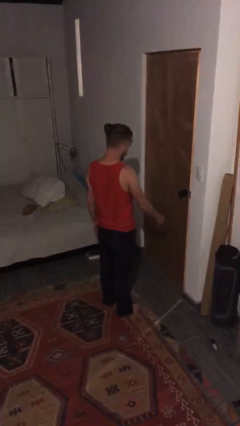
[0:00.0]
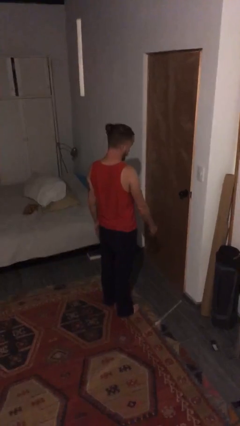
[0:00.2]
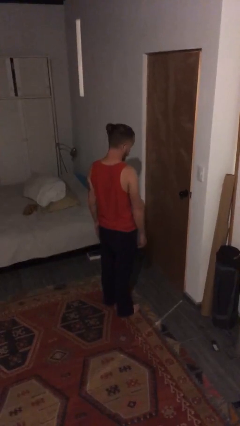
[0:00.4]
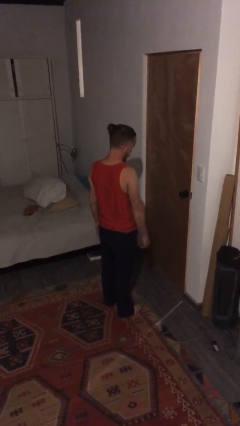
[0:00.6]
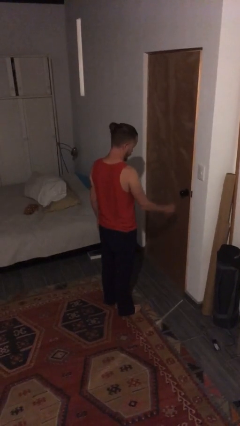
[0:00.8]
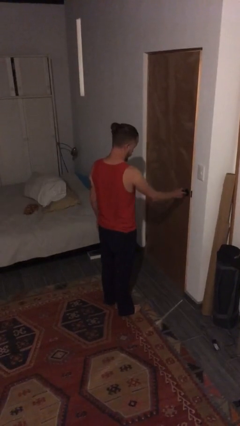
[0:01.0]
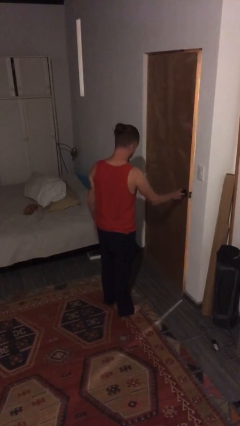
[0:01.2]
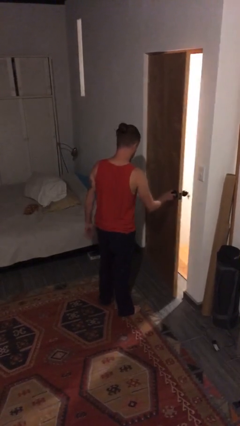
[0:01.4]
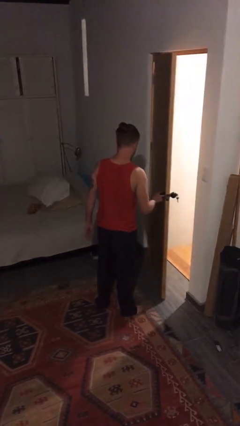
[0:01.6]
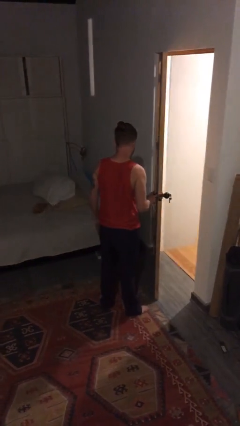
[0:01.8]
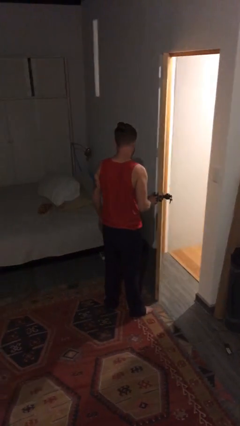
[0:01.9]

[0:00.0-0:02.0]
person opens facility door

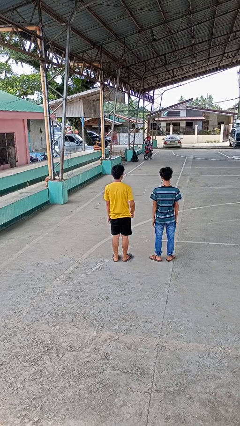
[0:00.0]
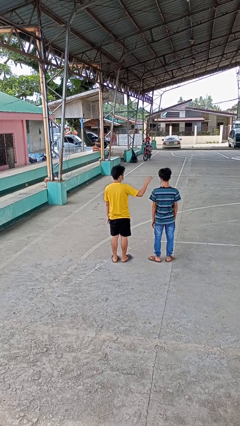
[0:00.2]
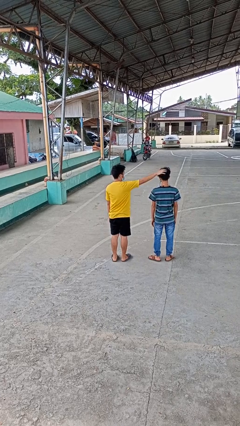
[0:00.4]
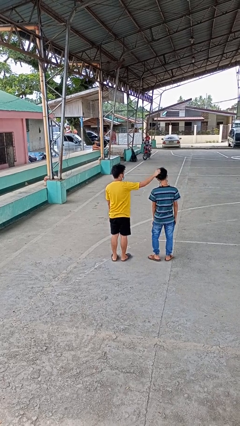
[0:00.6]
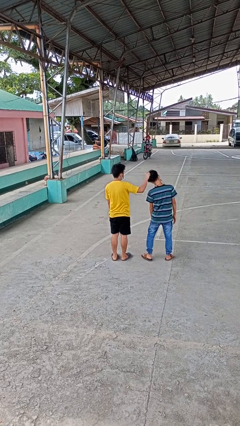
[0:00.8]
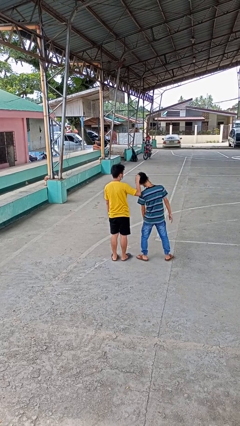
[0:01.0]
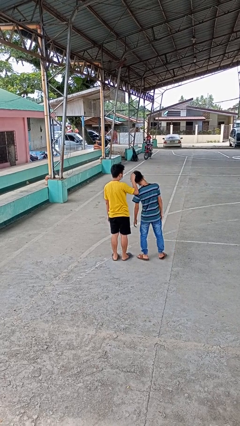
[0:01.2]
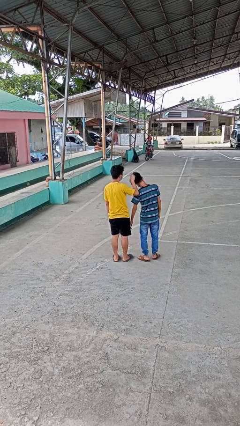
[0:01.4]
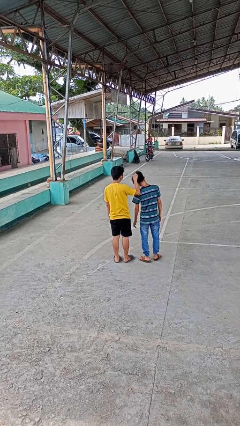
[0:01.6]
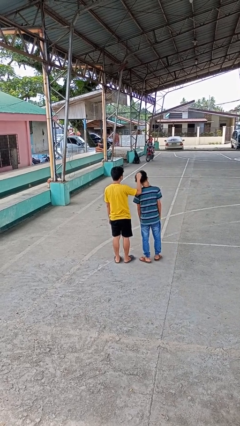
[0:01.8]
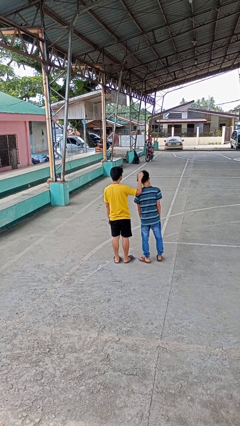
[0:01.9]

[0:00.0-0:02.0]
person grabs person by hair

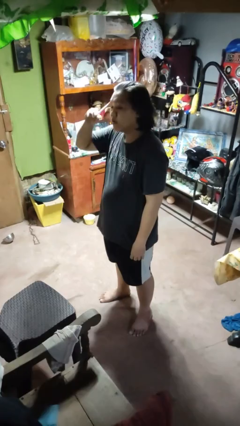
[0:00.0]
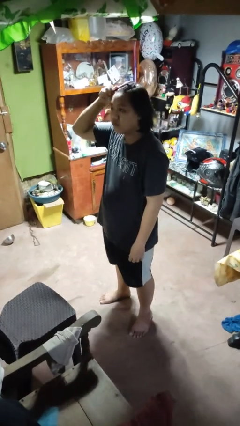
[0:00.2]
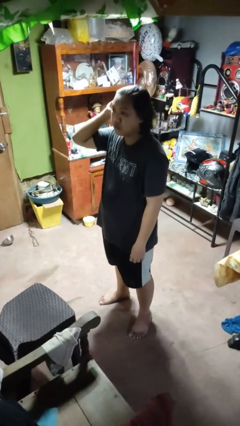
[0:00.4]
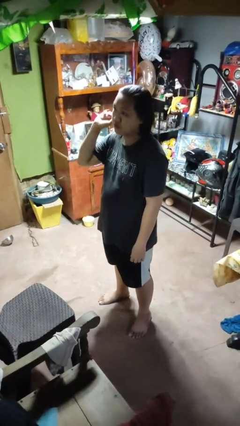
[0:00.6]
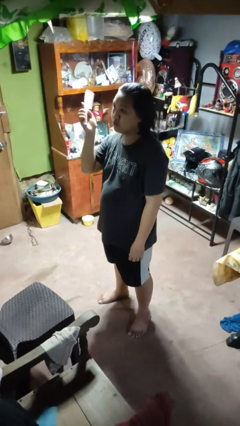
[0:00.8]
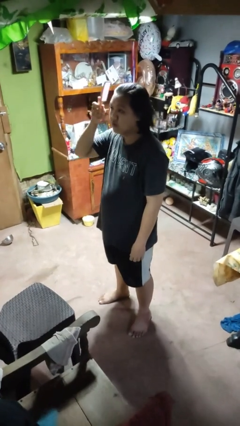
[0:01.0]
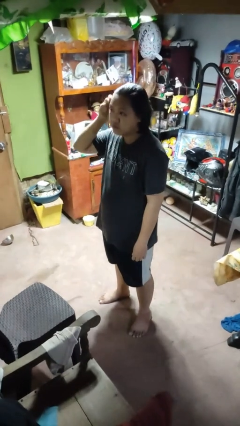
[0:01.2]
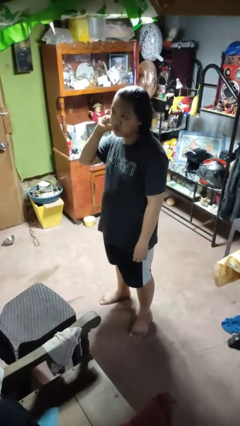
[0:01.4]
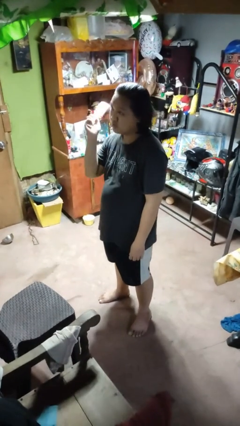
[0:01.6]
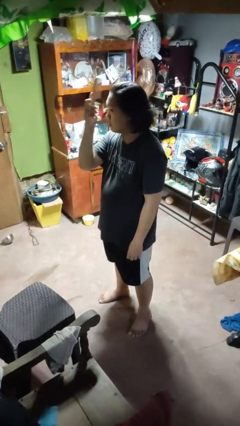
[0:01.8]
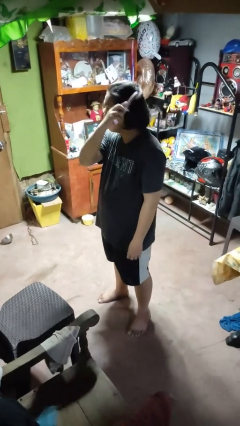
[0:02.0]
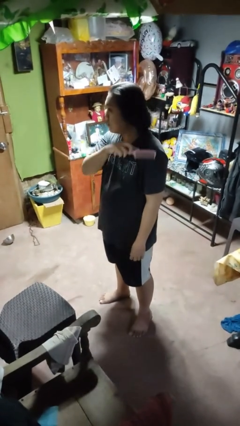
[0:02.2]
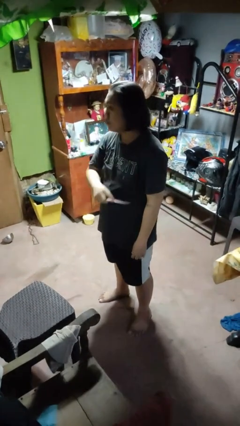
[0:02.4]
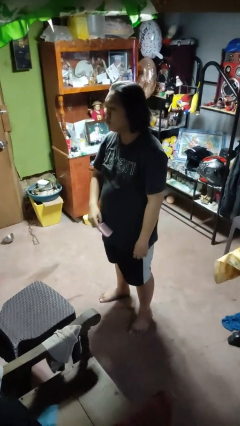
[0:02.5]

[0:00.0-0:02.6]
person brushes hair

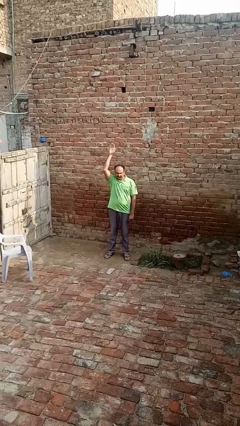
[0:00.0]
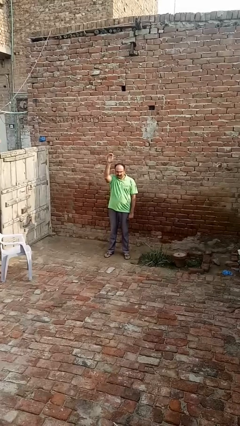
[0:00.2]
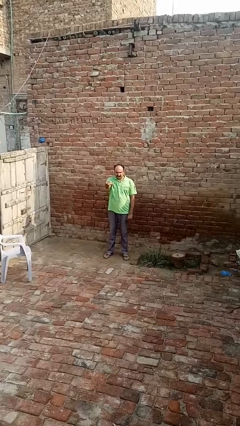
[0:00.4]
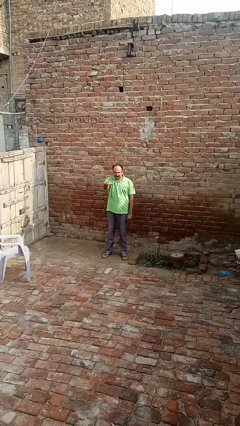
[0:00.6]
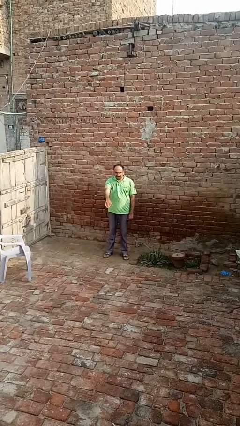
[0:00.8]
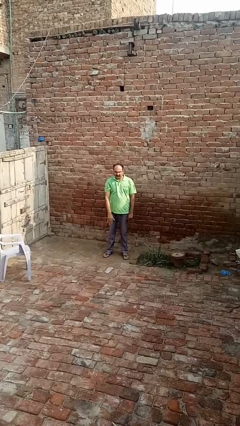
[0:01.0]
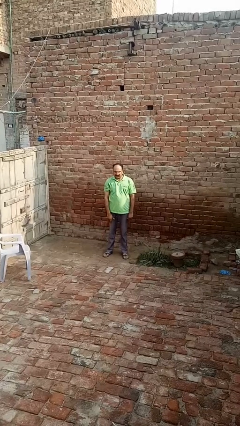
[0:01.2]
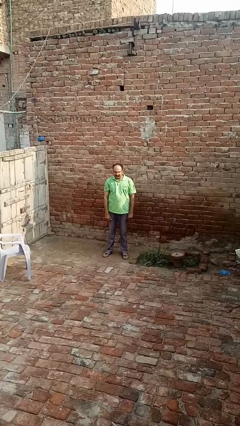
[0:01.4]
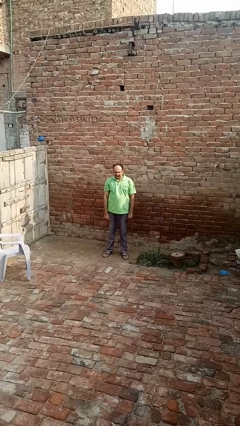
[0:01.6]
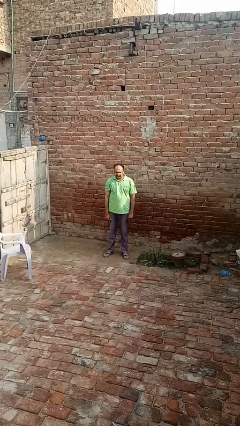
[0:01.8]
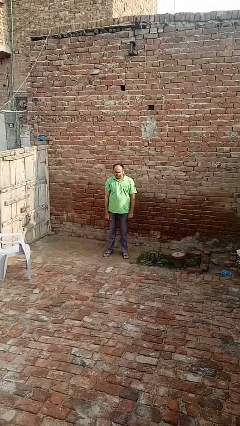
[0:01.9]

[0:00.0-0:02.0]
person gestures swipe down

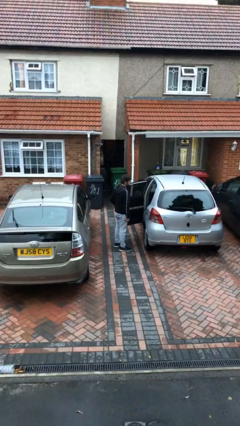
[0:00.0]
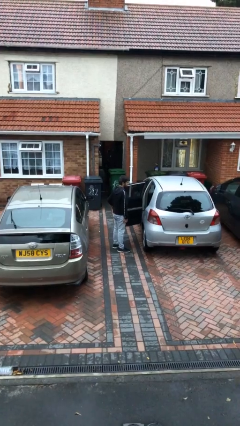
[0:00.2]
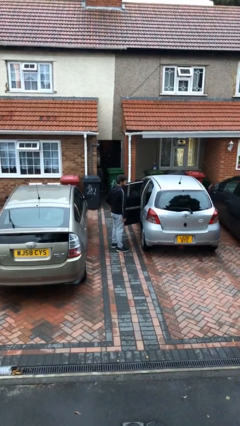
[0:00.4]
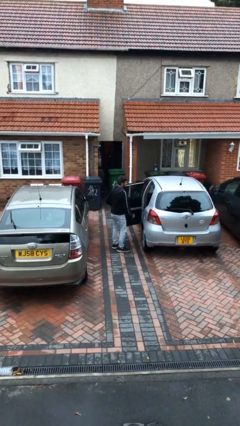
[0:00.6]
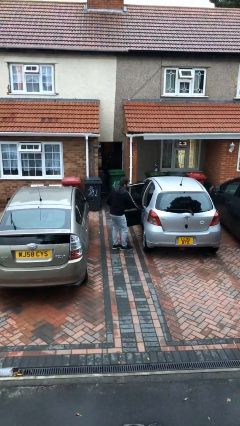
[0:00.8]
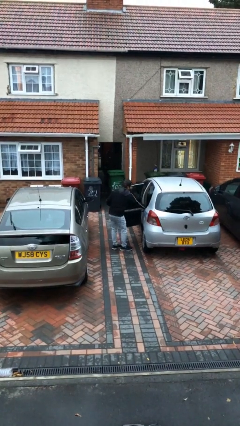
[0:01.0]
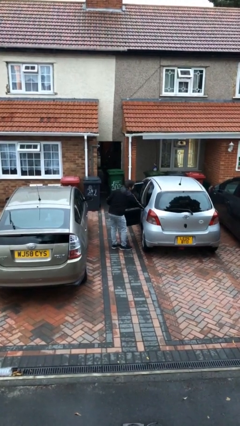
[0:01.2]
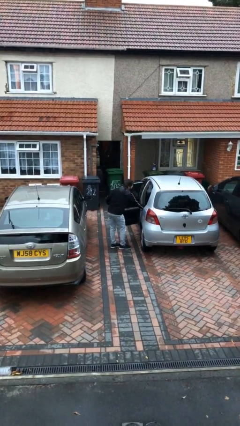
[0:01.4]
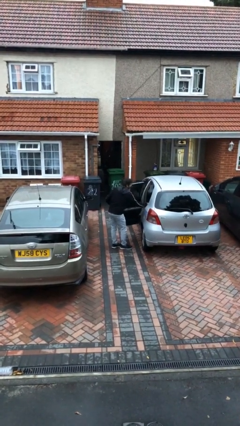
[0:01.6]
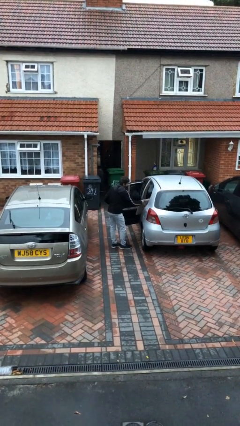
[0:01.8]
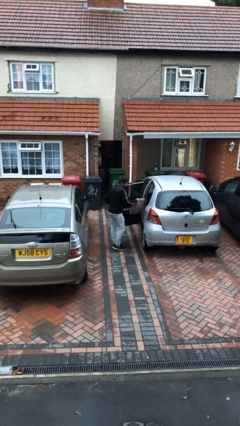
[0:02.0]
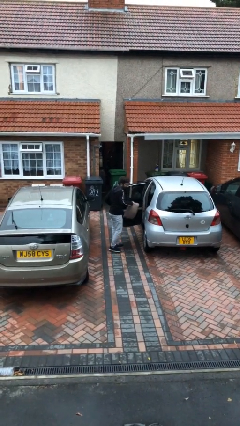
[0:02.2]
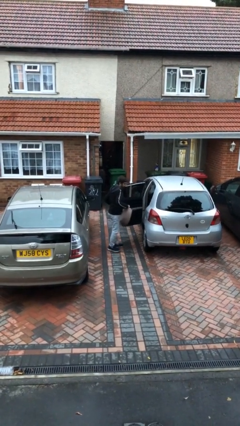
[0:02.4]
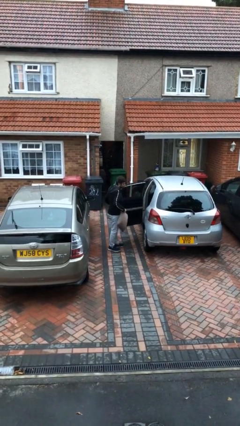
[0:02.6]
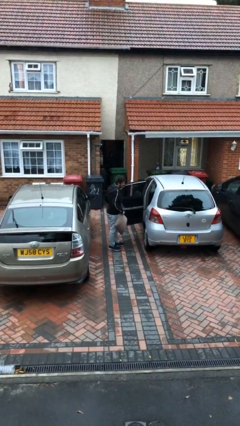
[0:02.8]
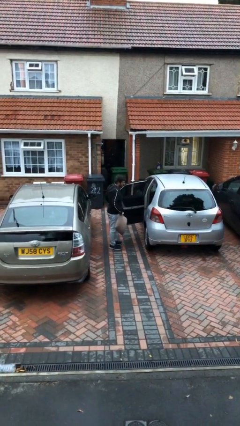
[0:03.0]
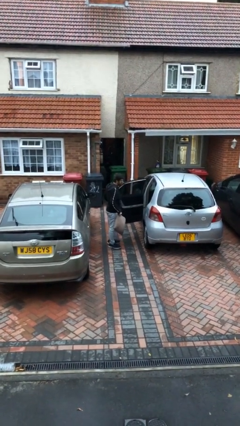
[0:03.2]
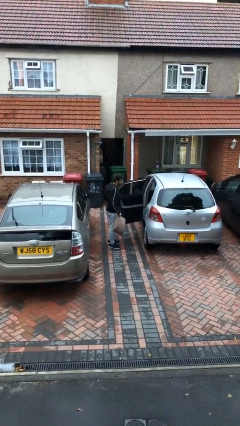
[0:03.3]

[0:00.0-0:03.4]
person unloads car

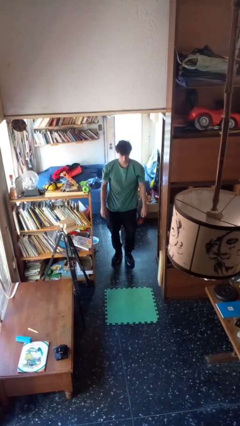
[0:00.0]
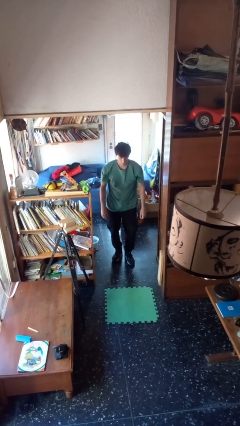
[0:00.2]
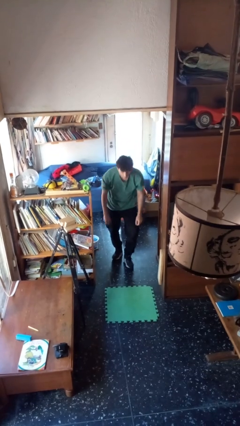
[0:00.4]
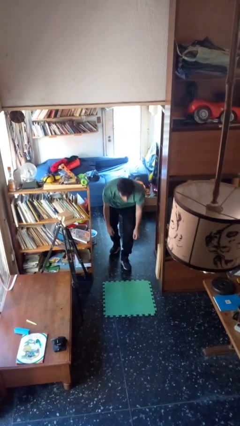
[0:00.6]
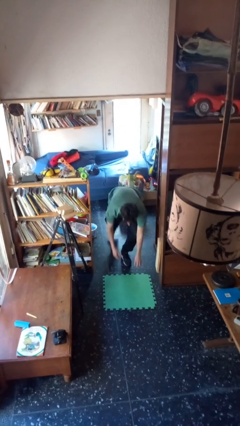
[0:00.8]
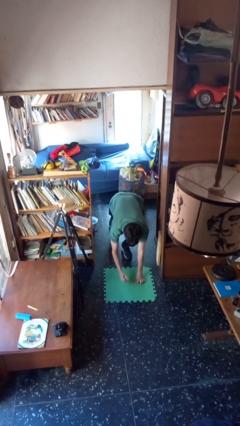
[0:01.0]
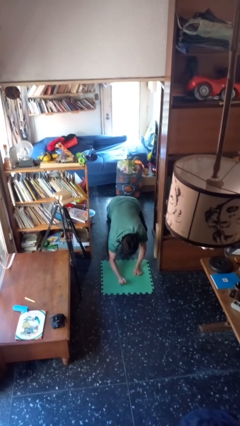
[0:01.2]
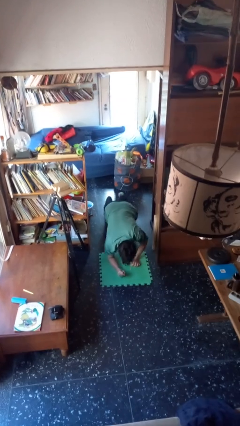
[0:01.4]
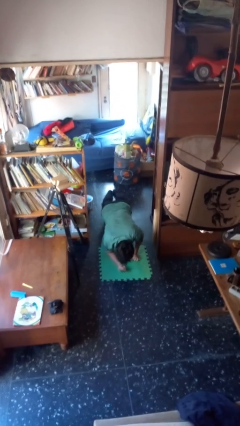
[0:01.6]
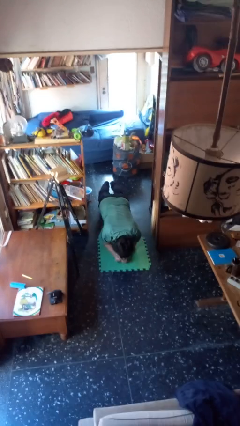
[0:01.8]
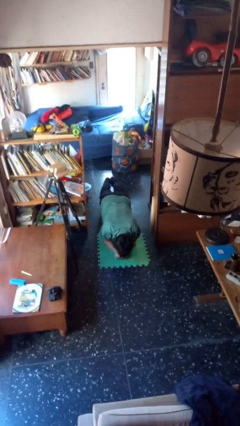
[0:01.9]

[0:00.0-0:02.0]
person exercises with plank

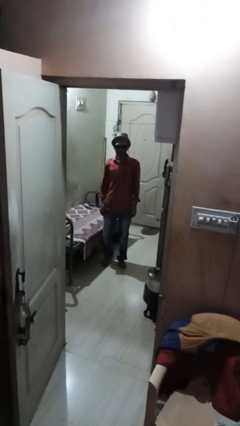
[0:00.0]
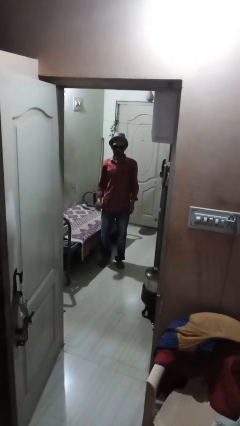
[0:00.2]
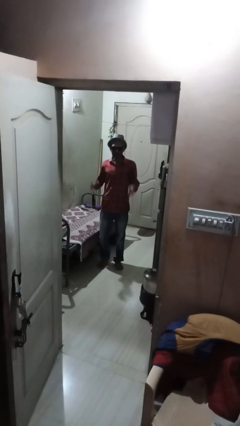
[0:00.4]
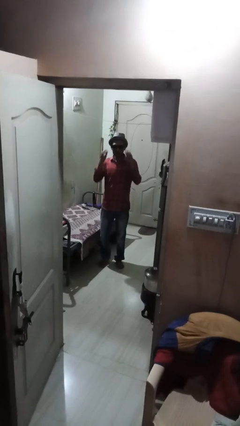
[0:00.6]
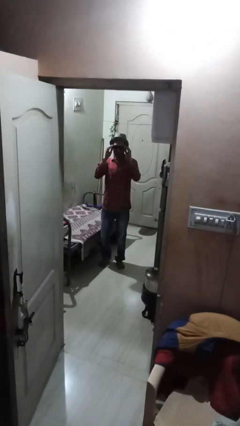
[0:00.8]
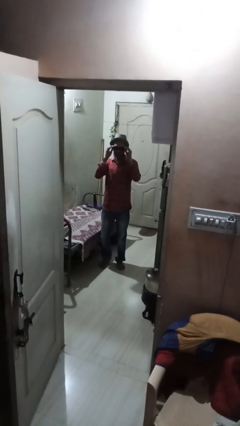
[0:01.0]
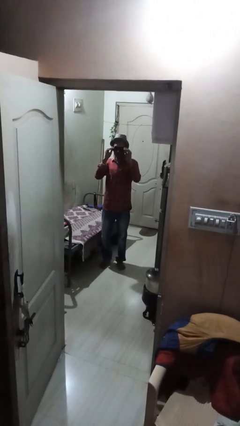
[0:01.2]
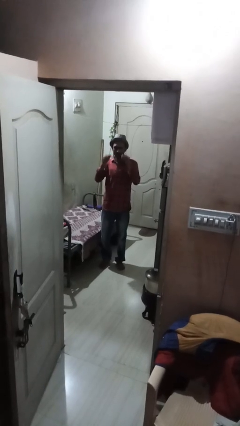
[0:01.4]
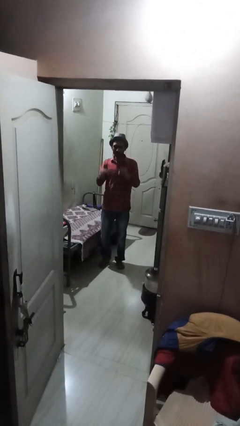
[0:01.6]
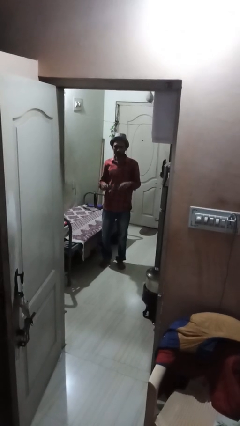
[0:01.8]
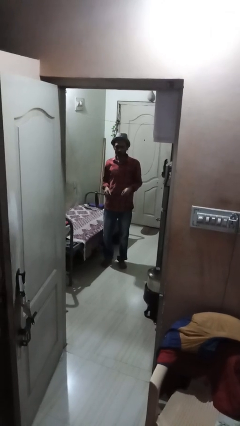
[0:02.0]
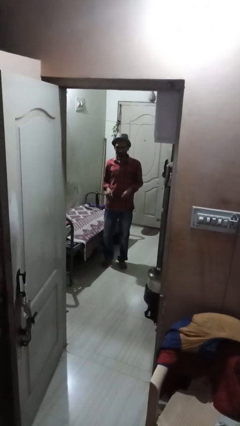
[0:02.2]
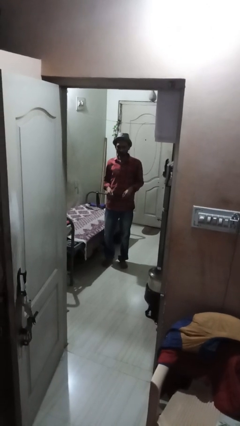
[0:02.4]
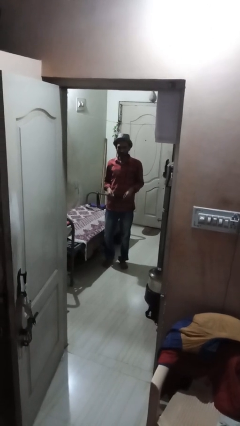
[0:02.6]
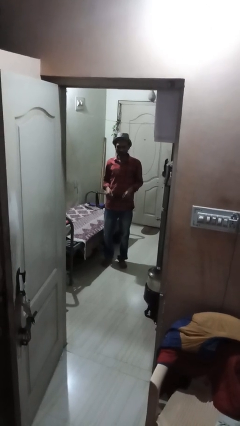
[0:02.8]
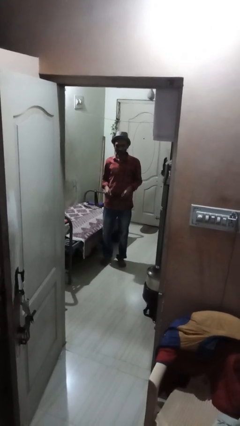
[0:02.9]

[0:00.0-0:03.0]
person takes off sunglasses

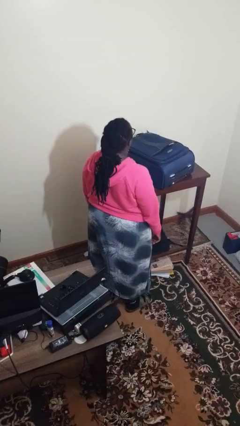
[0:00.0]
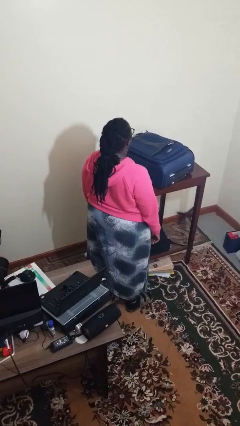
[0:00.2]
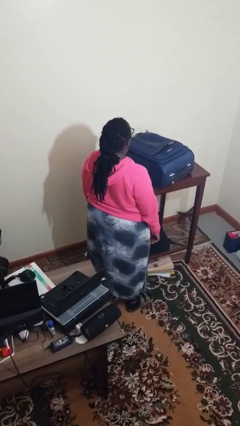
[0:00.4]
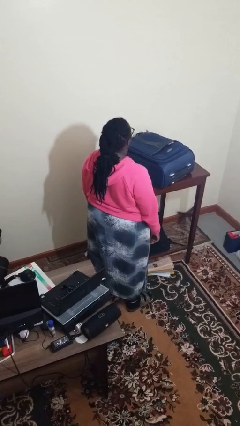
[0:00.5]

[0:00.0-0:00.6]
person opens suitcase
